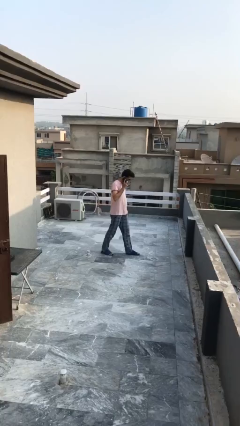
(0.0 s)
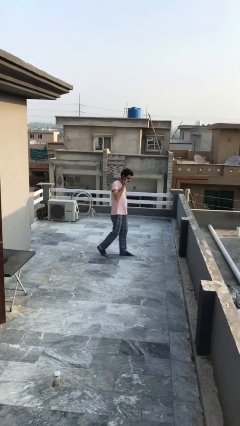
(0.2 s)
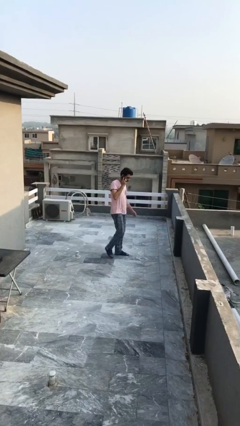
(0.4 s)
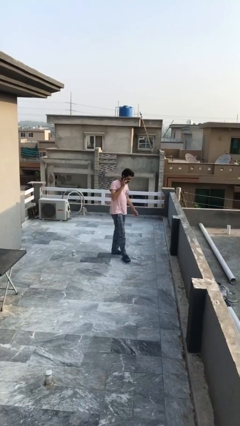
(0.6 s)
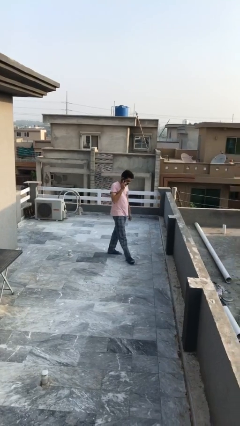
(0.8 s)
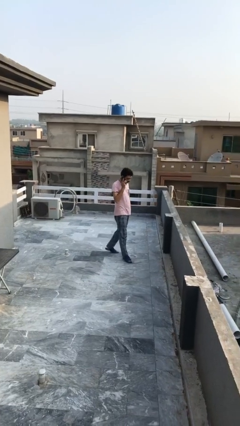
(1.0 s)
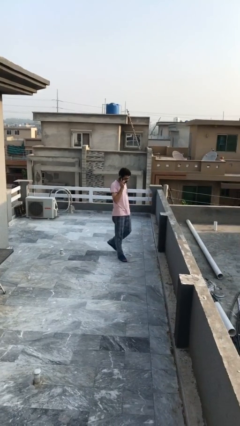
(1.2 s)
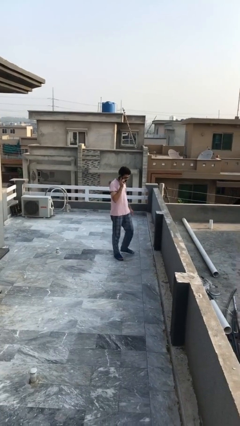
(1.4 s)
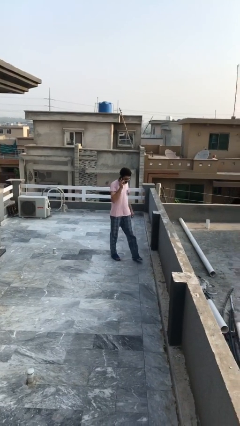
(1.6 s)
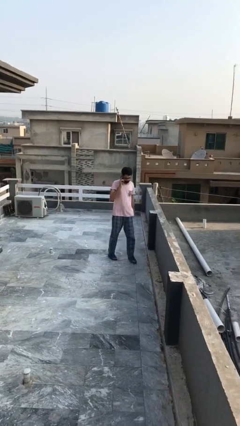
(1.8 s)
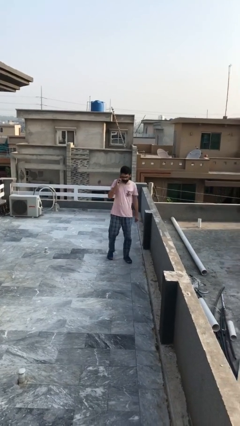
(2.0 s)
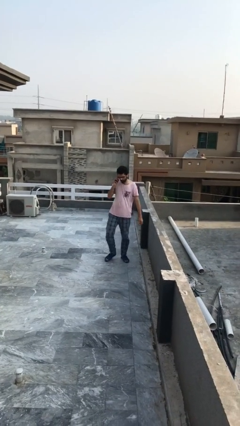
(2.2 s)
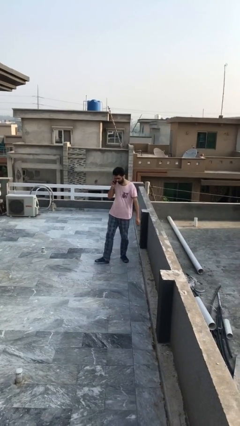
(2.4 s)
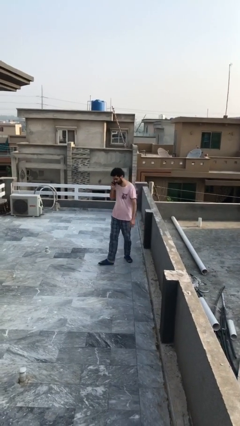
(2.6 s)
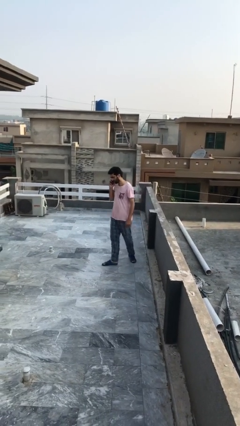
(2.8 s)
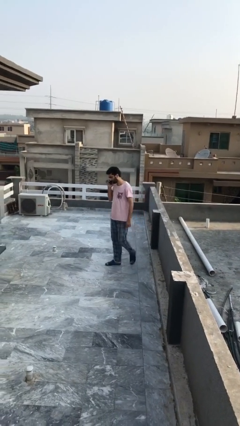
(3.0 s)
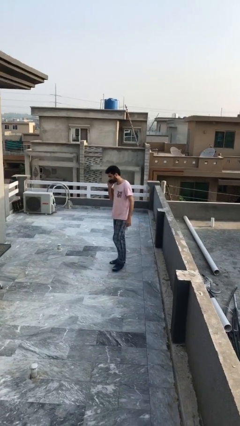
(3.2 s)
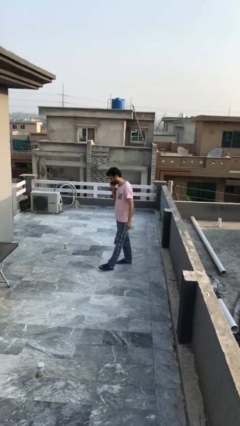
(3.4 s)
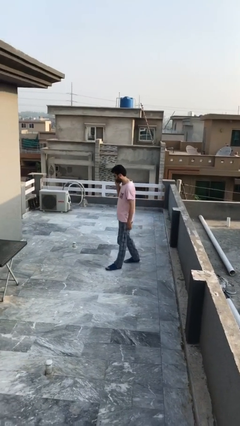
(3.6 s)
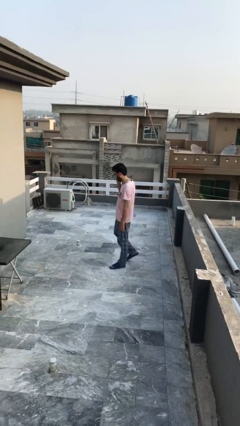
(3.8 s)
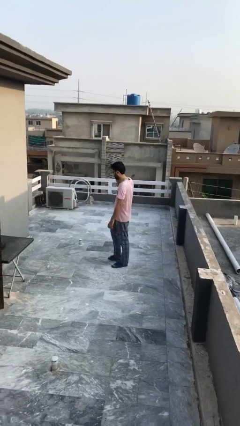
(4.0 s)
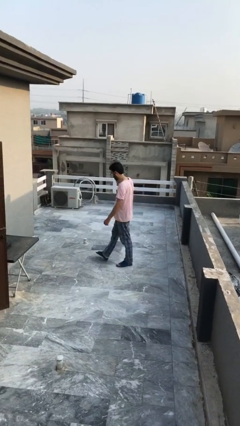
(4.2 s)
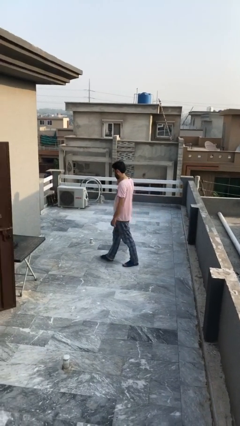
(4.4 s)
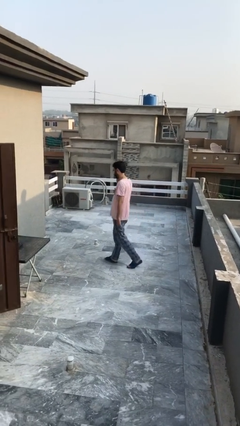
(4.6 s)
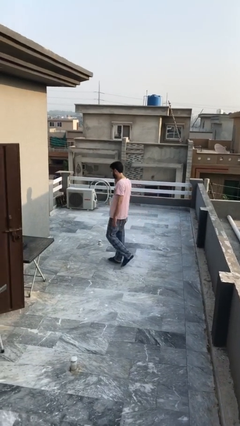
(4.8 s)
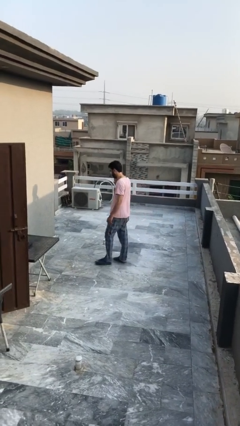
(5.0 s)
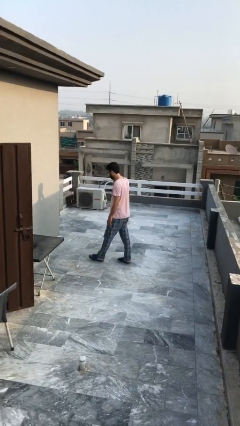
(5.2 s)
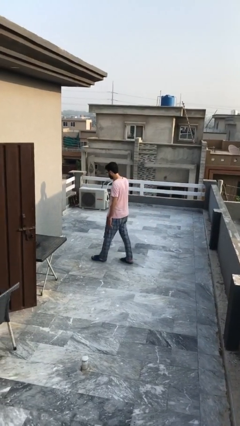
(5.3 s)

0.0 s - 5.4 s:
person talks on phone

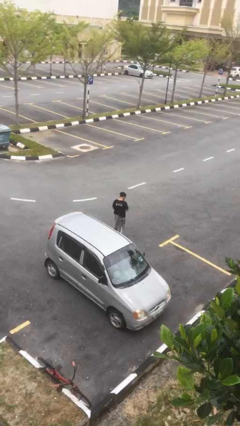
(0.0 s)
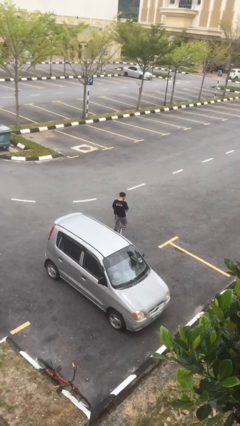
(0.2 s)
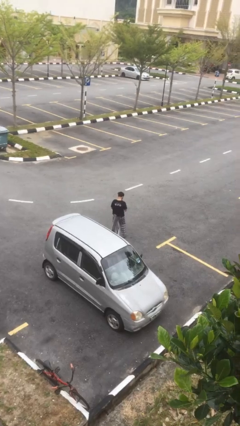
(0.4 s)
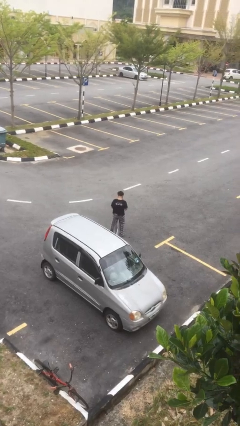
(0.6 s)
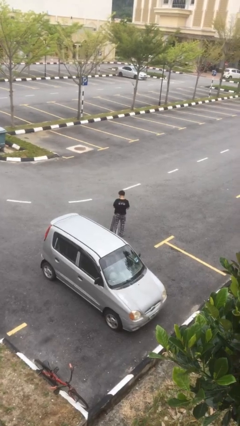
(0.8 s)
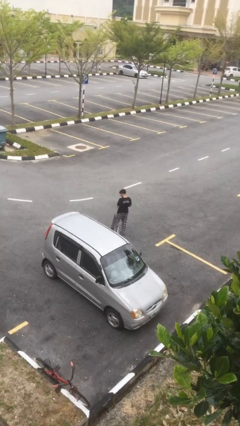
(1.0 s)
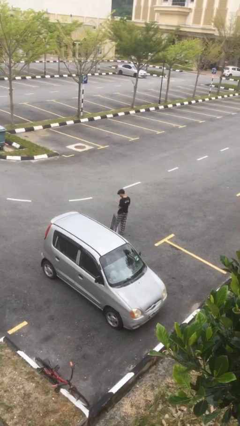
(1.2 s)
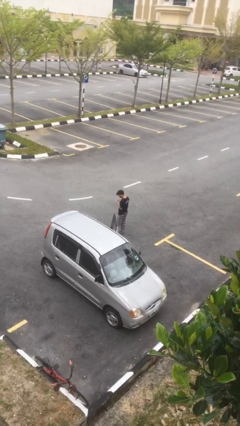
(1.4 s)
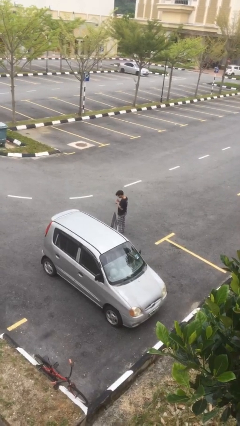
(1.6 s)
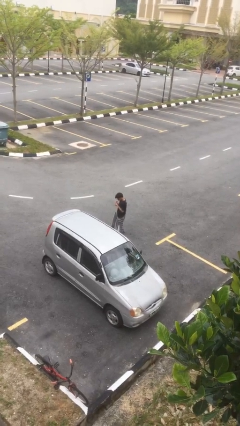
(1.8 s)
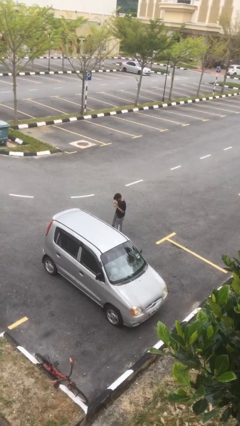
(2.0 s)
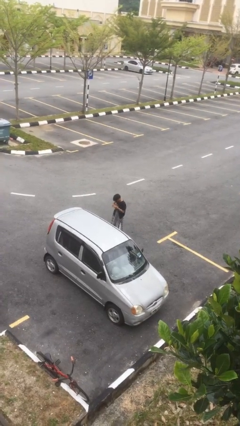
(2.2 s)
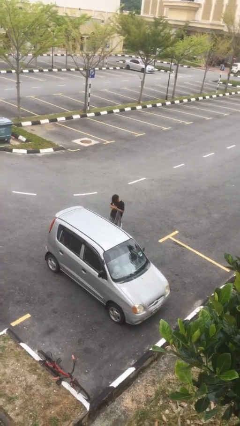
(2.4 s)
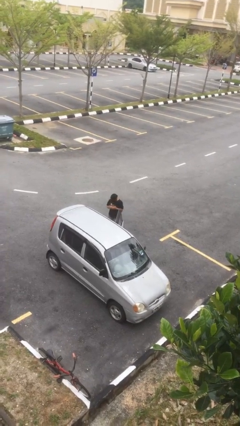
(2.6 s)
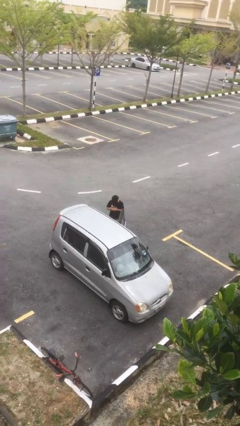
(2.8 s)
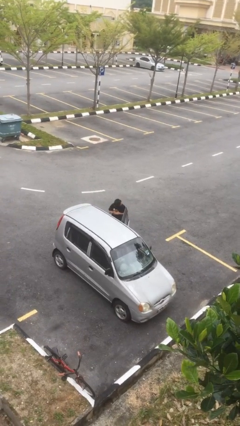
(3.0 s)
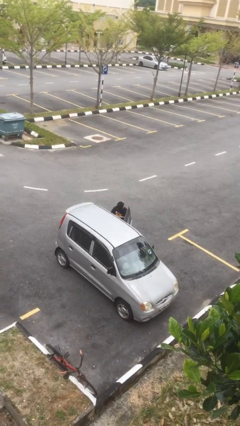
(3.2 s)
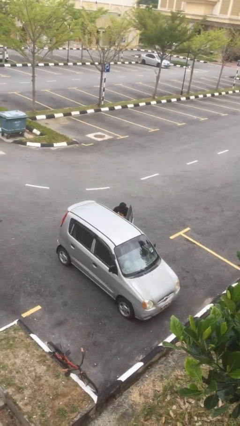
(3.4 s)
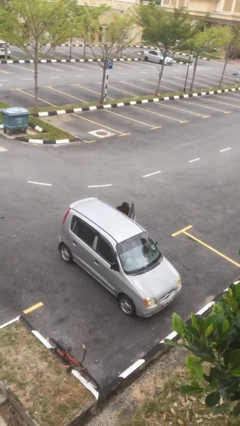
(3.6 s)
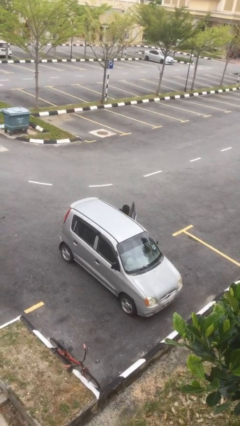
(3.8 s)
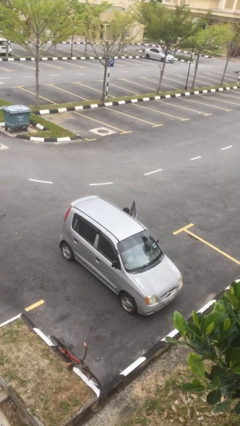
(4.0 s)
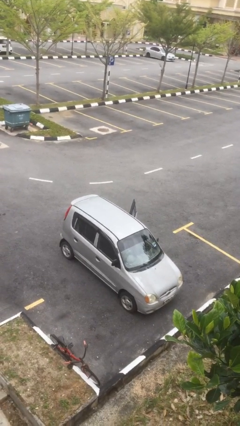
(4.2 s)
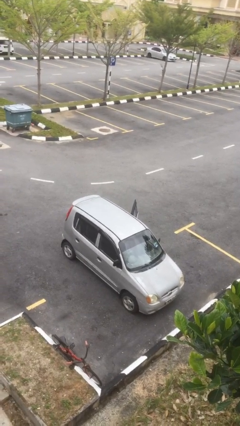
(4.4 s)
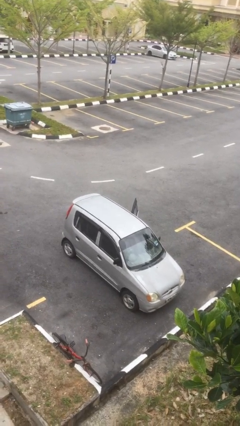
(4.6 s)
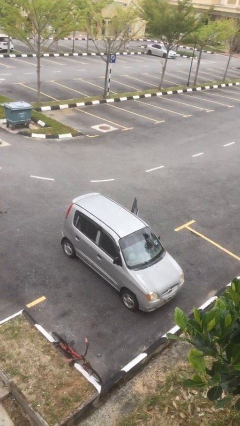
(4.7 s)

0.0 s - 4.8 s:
person enters car

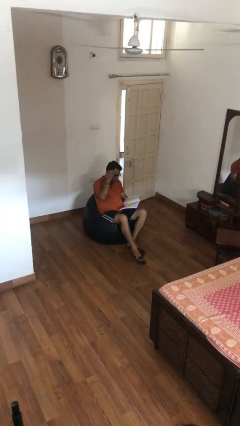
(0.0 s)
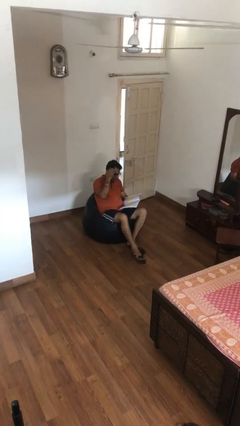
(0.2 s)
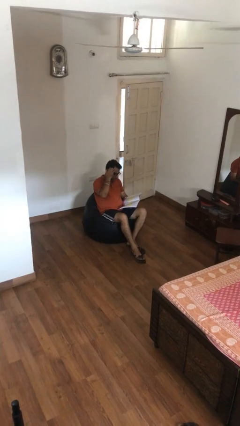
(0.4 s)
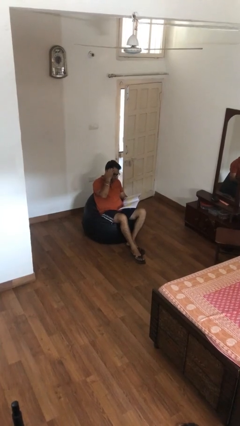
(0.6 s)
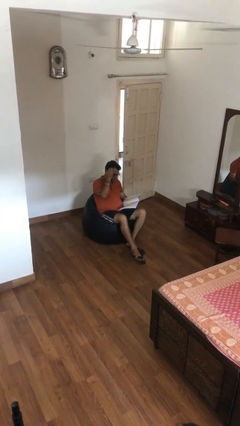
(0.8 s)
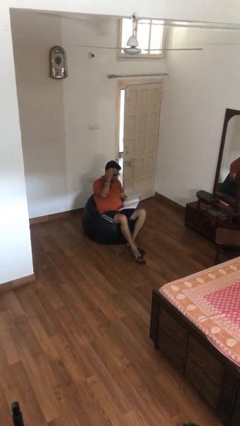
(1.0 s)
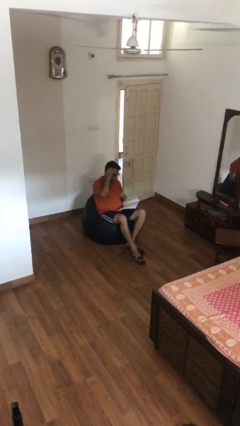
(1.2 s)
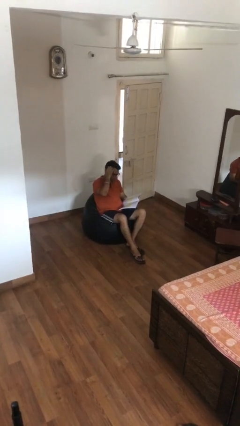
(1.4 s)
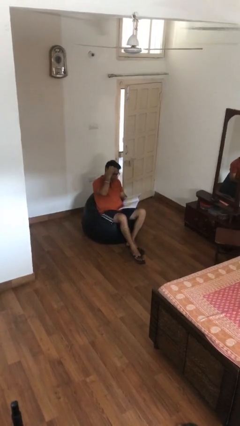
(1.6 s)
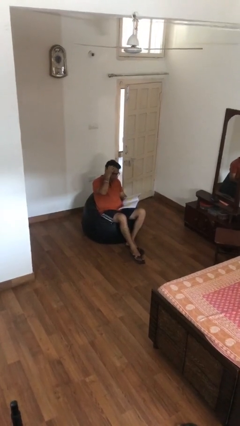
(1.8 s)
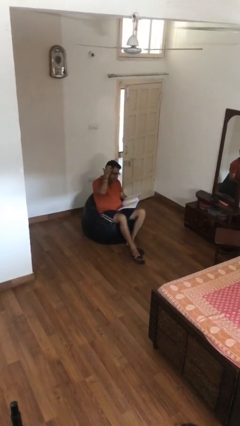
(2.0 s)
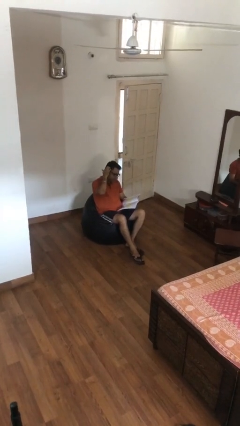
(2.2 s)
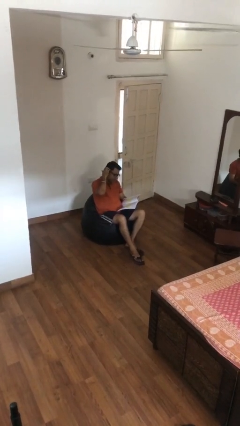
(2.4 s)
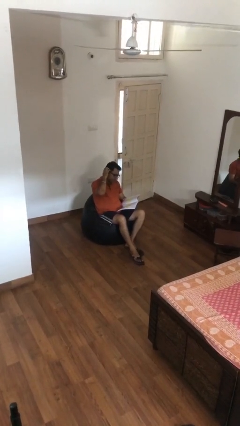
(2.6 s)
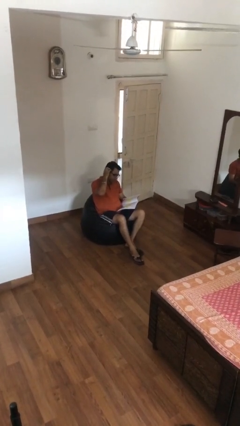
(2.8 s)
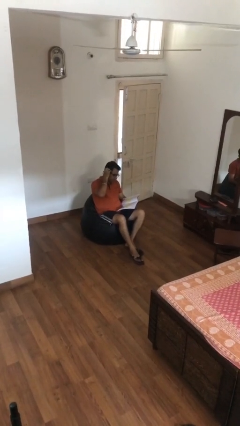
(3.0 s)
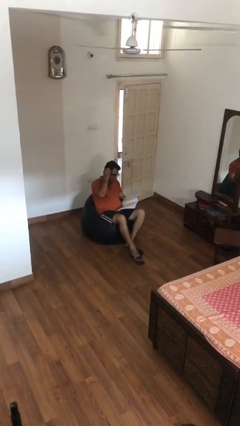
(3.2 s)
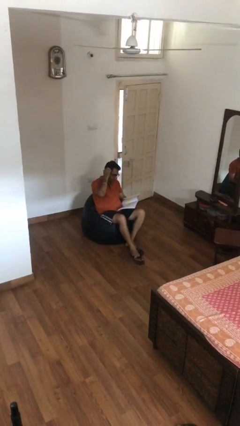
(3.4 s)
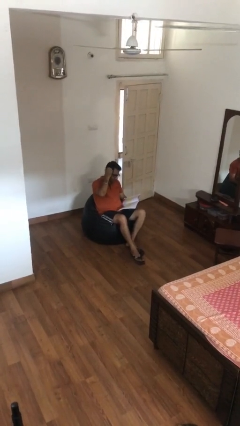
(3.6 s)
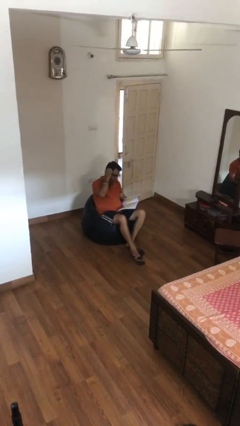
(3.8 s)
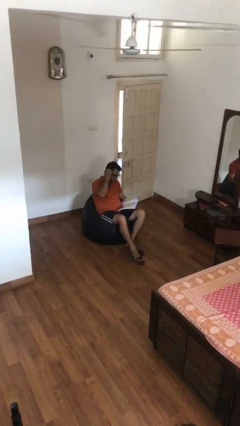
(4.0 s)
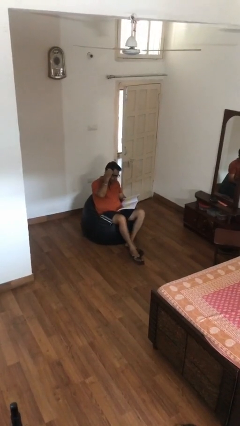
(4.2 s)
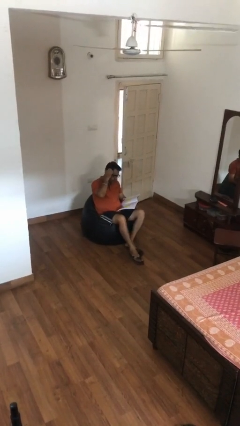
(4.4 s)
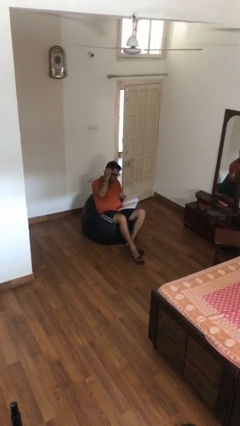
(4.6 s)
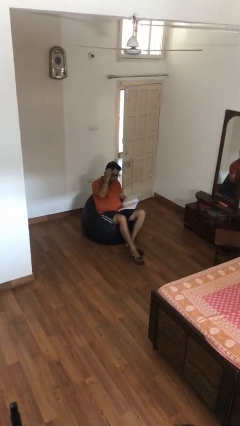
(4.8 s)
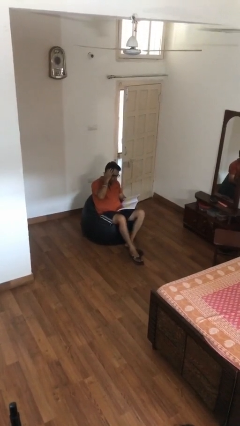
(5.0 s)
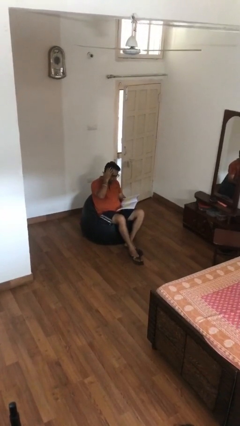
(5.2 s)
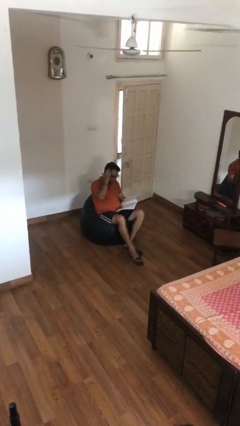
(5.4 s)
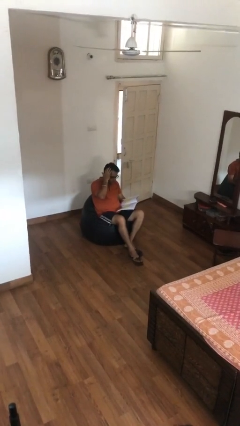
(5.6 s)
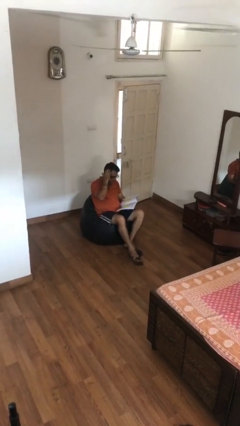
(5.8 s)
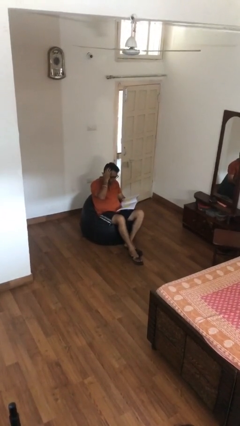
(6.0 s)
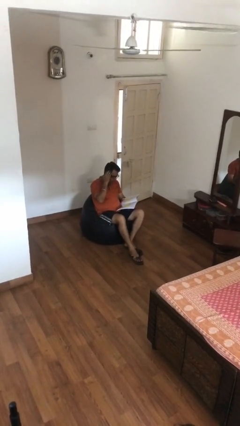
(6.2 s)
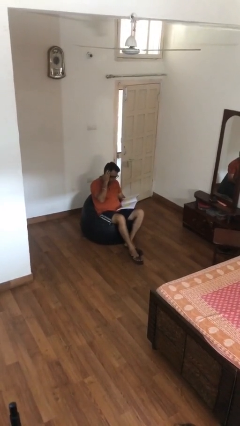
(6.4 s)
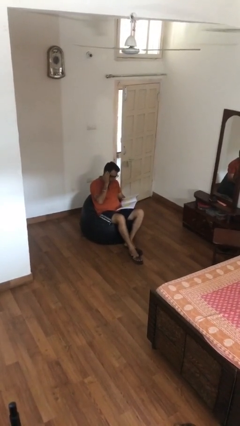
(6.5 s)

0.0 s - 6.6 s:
person reads document

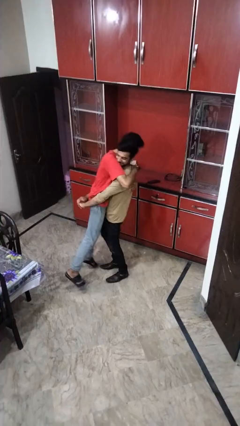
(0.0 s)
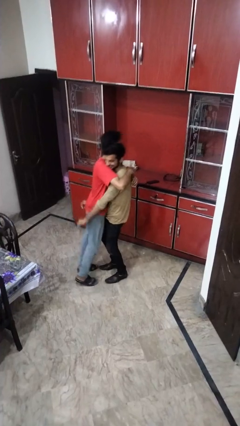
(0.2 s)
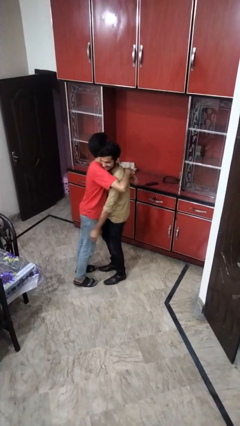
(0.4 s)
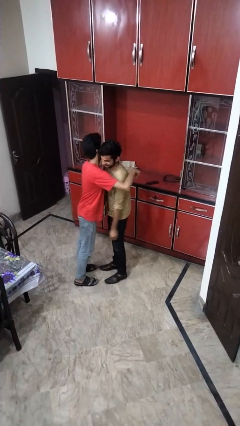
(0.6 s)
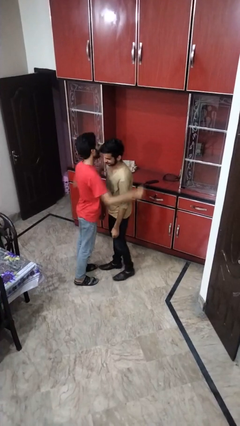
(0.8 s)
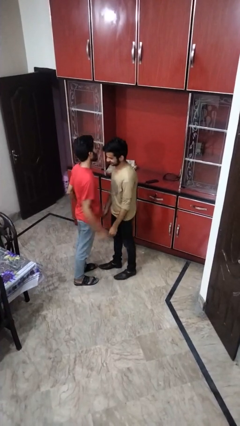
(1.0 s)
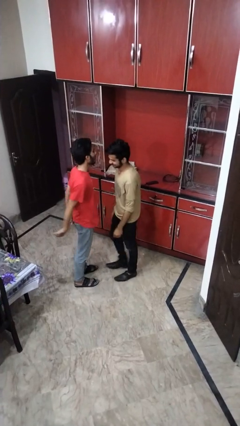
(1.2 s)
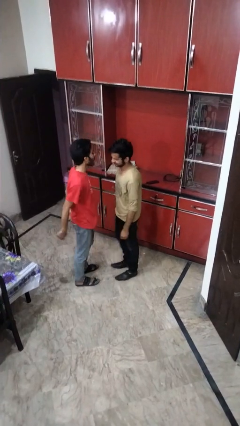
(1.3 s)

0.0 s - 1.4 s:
person puts down person
